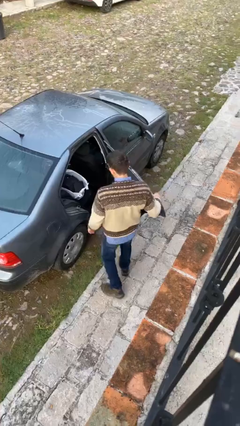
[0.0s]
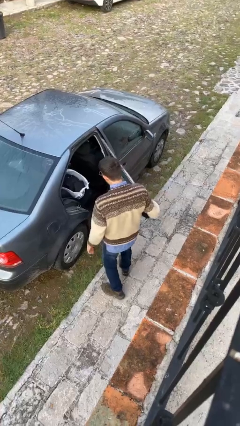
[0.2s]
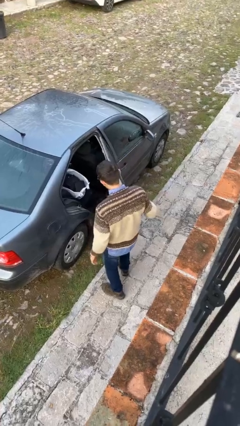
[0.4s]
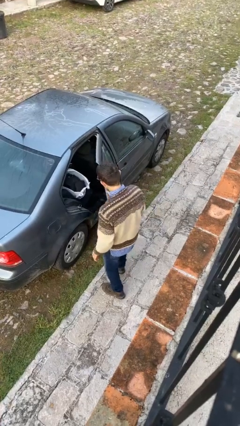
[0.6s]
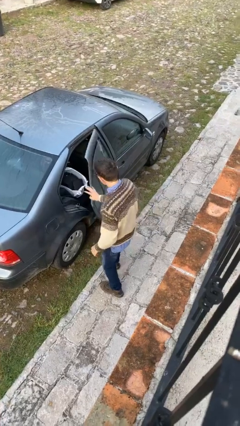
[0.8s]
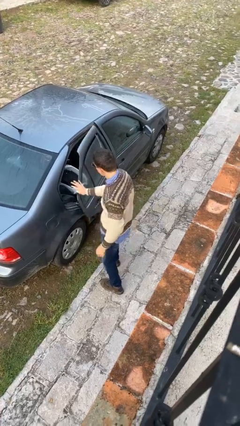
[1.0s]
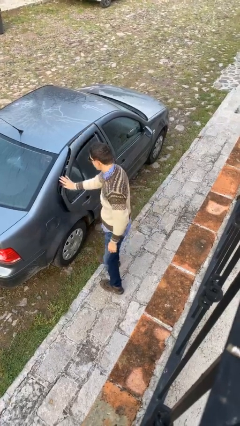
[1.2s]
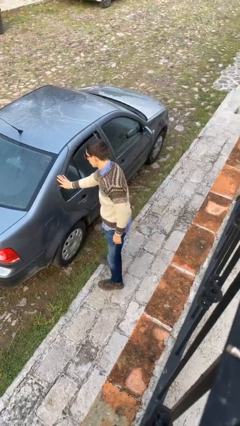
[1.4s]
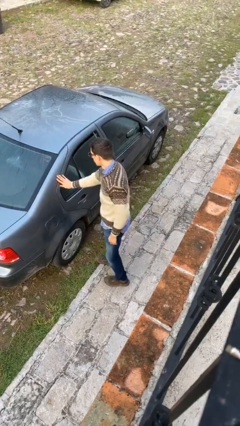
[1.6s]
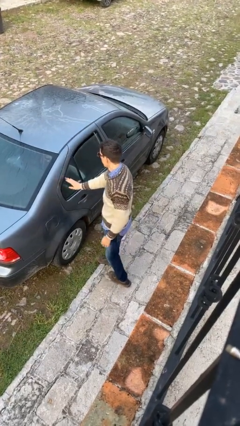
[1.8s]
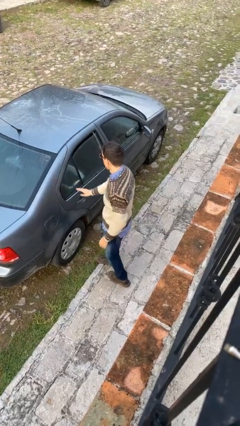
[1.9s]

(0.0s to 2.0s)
person closes car door

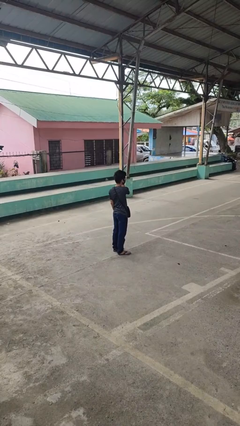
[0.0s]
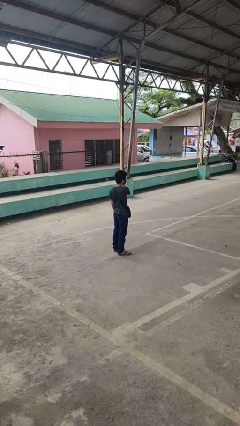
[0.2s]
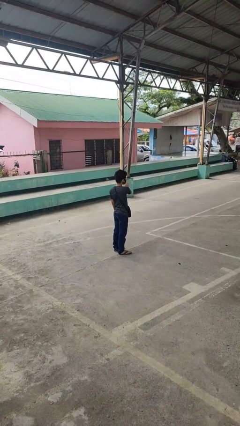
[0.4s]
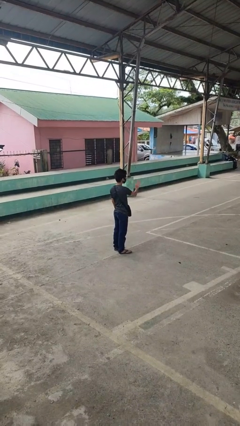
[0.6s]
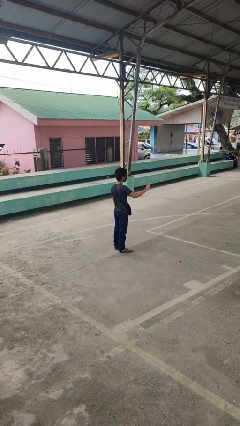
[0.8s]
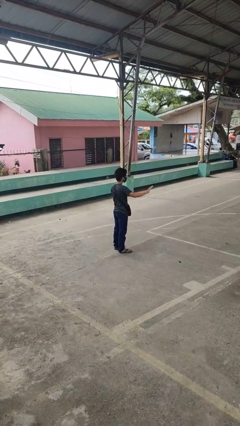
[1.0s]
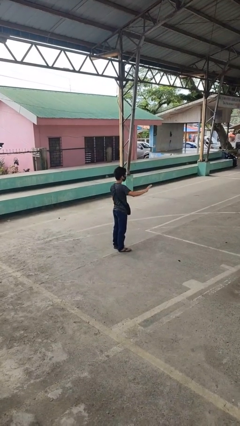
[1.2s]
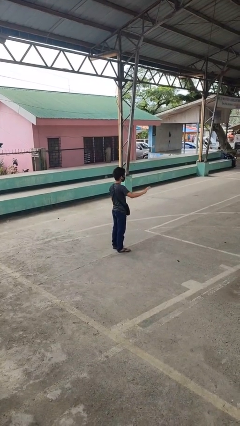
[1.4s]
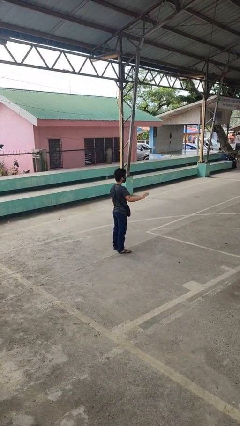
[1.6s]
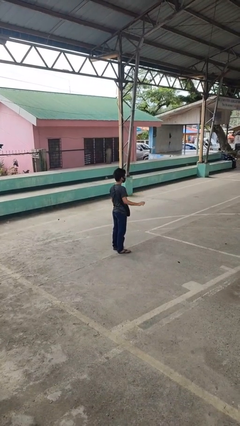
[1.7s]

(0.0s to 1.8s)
person gestures swipe right

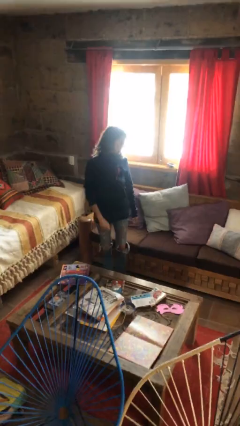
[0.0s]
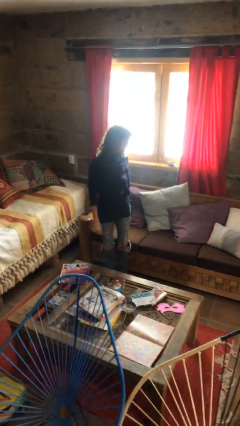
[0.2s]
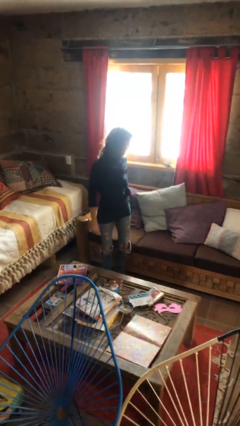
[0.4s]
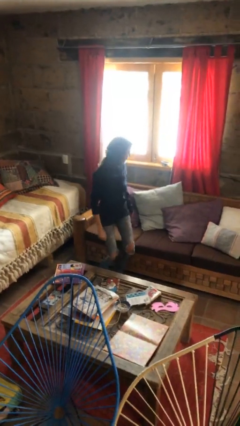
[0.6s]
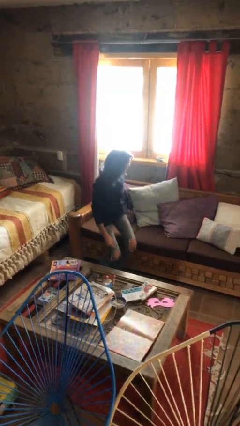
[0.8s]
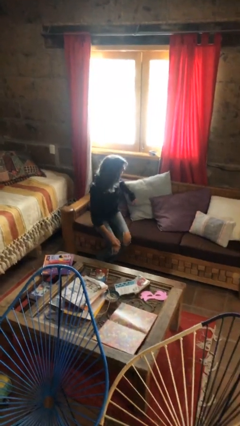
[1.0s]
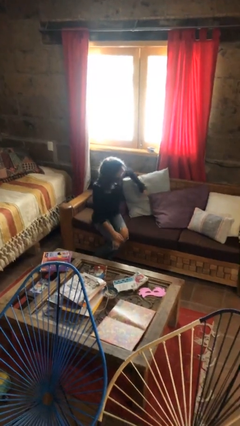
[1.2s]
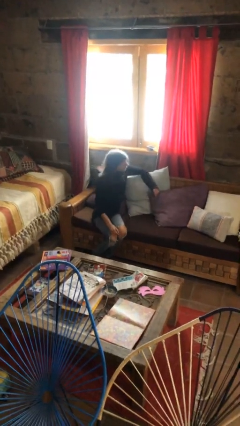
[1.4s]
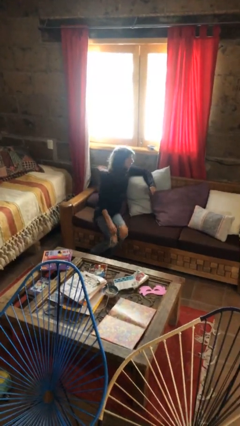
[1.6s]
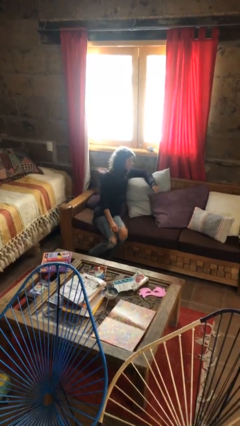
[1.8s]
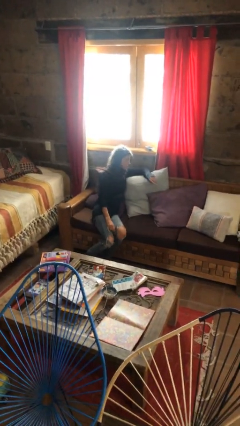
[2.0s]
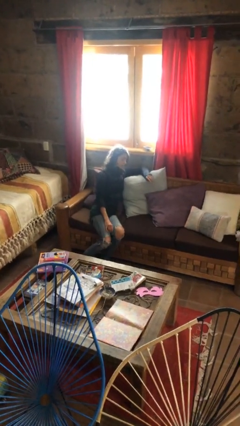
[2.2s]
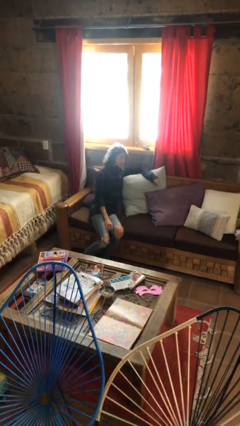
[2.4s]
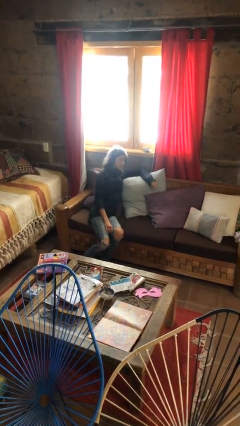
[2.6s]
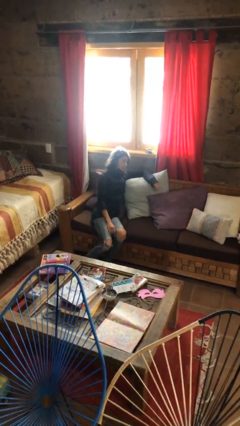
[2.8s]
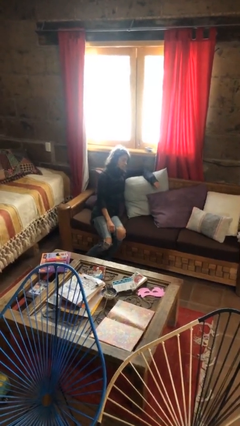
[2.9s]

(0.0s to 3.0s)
person lies down on couch

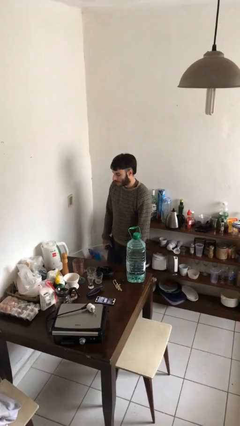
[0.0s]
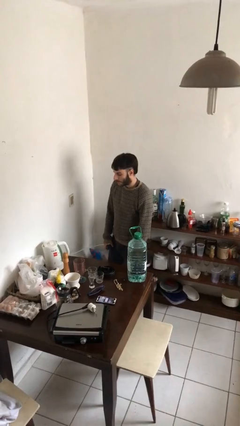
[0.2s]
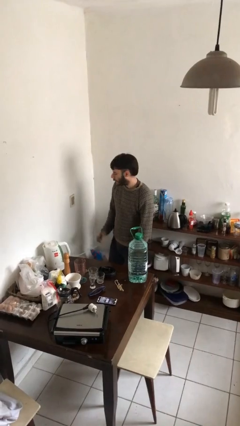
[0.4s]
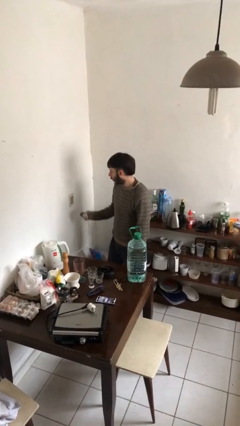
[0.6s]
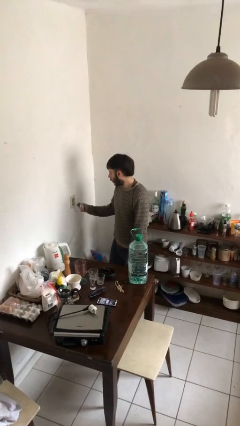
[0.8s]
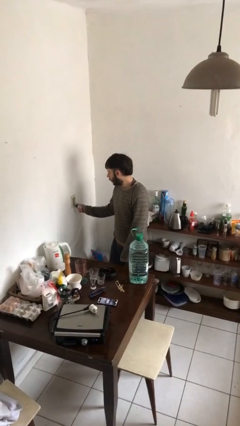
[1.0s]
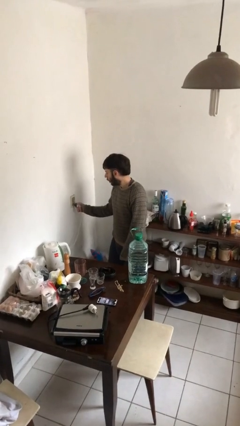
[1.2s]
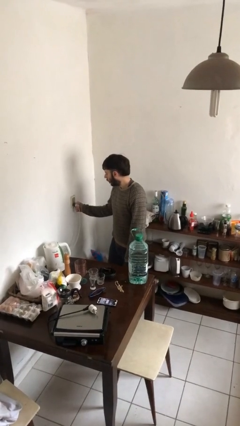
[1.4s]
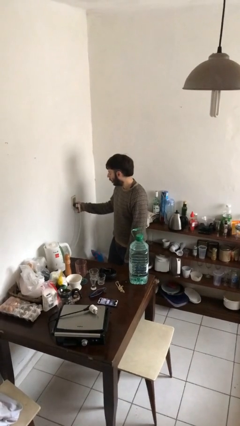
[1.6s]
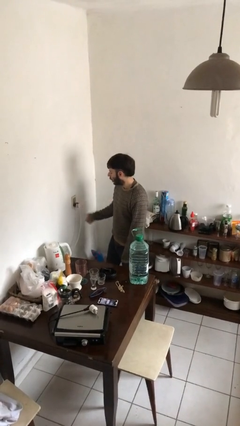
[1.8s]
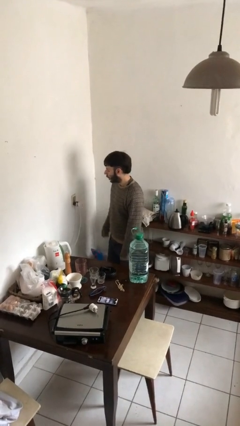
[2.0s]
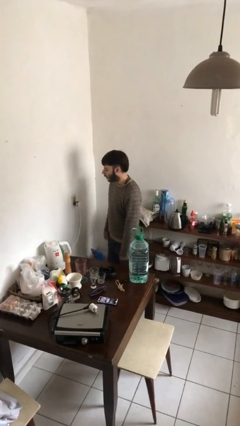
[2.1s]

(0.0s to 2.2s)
person plugs into electrical socket

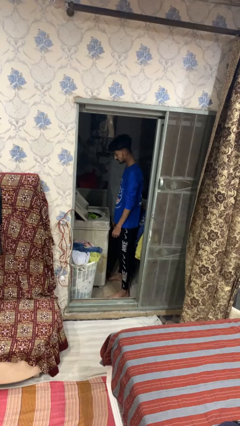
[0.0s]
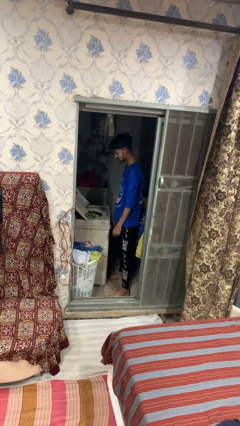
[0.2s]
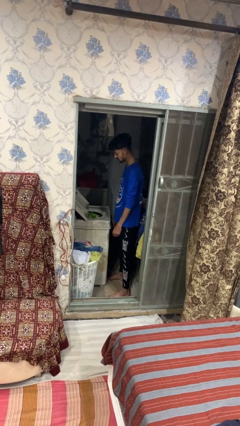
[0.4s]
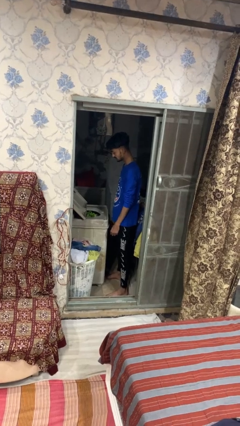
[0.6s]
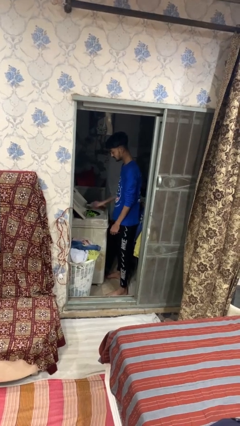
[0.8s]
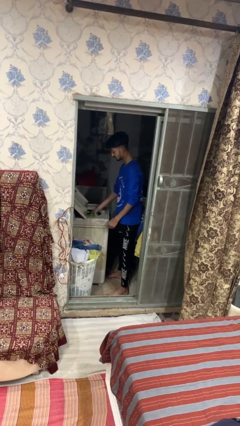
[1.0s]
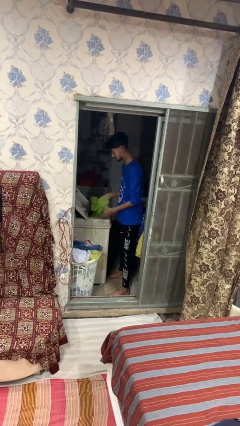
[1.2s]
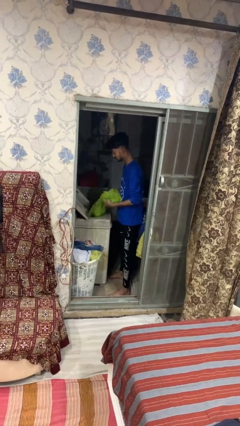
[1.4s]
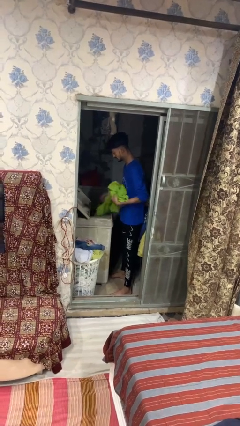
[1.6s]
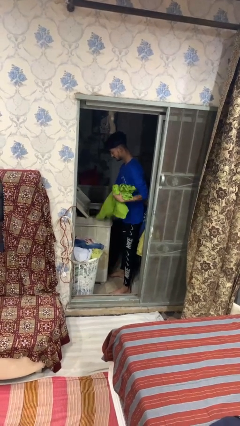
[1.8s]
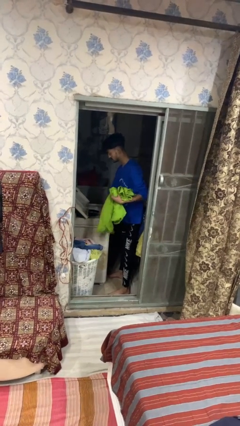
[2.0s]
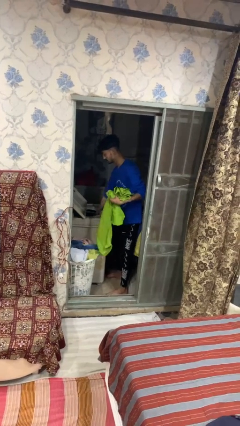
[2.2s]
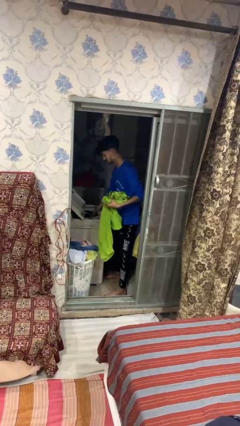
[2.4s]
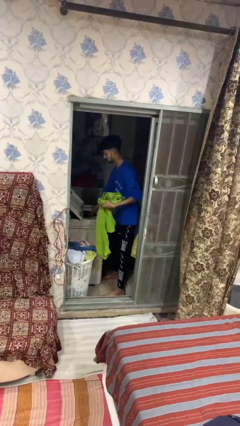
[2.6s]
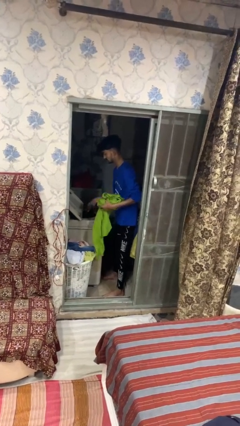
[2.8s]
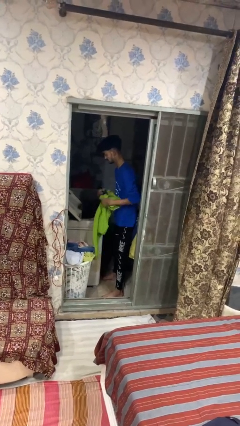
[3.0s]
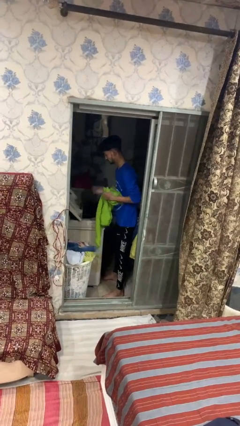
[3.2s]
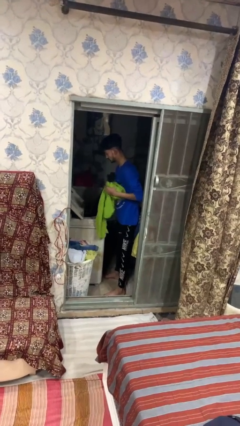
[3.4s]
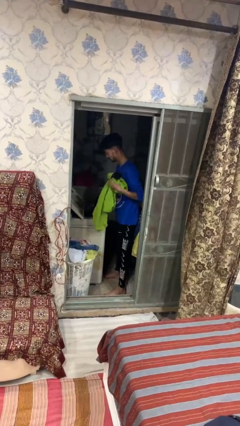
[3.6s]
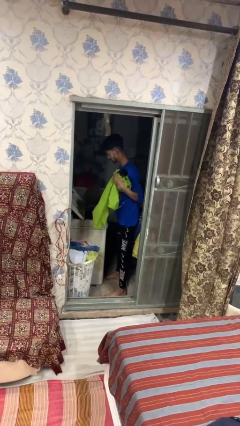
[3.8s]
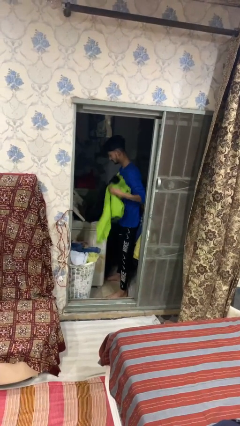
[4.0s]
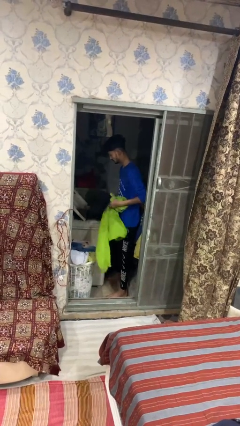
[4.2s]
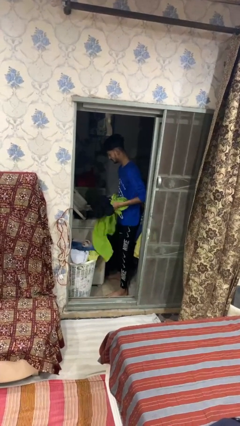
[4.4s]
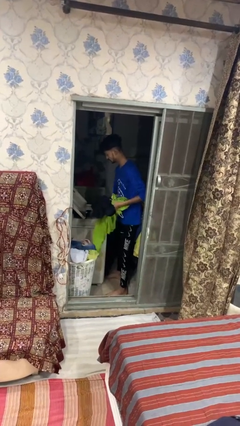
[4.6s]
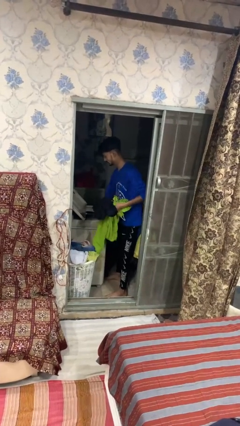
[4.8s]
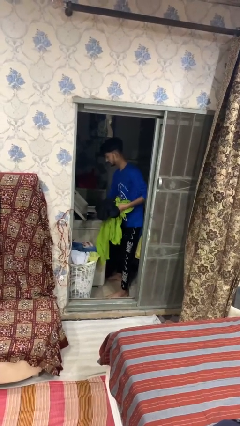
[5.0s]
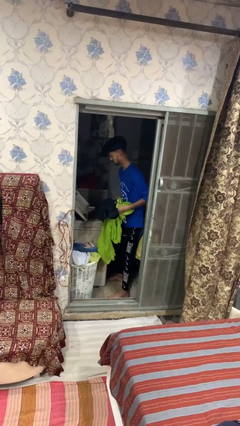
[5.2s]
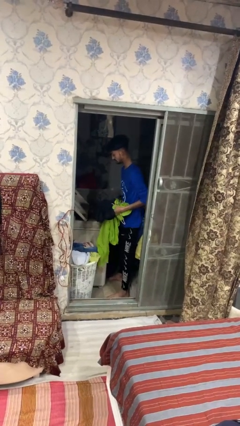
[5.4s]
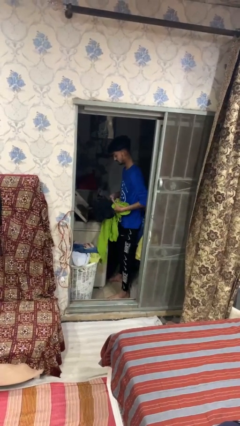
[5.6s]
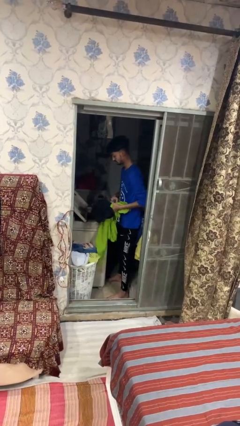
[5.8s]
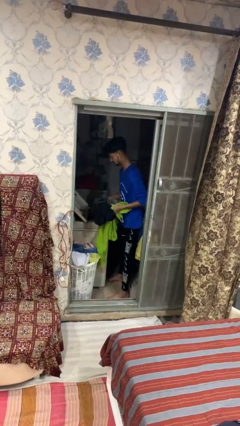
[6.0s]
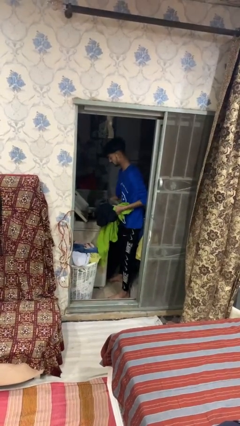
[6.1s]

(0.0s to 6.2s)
person unloads clotheswasher

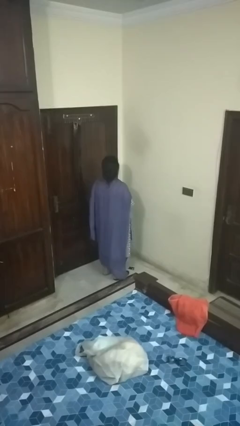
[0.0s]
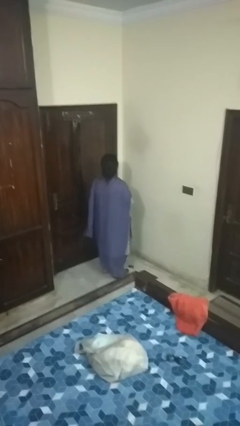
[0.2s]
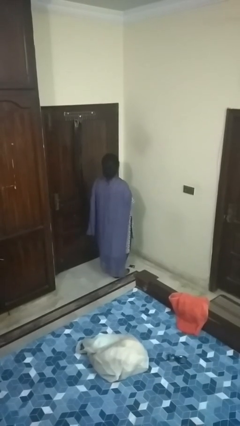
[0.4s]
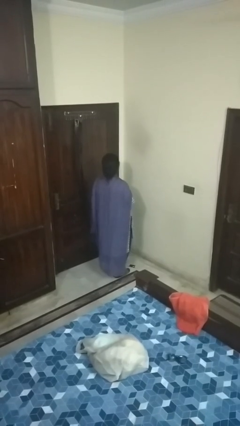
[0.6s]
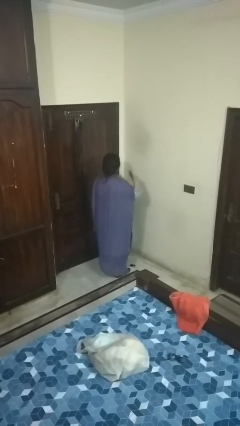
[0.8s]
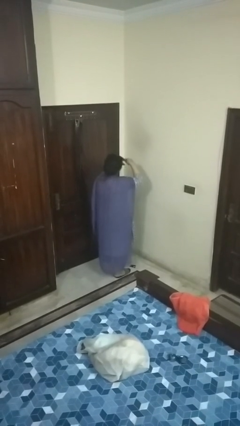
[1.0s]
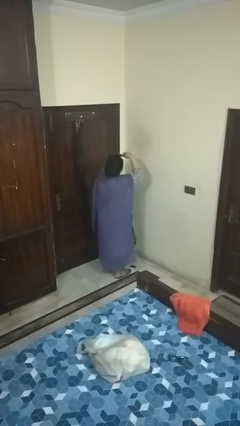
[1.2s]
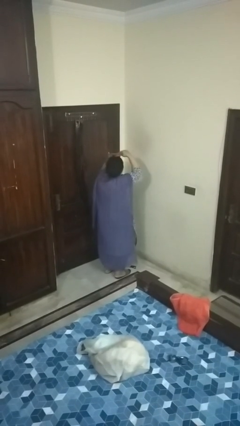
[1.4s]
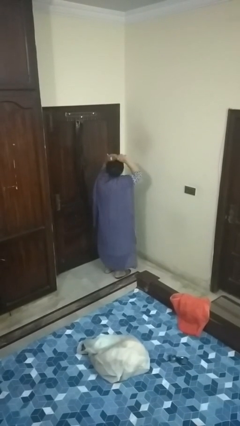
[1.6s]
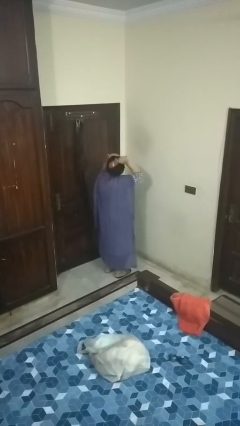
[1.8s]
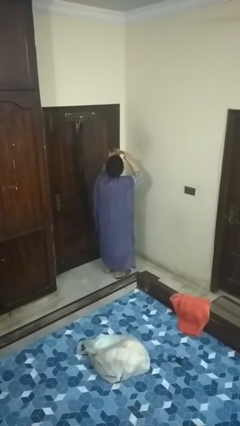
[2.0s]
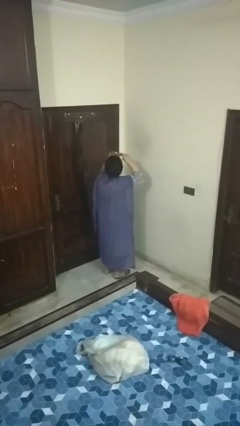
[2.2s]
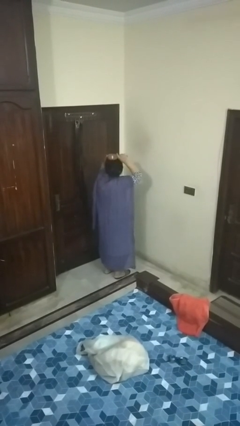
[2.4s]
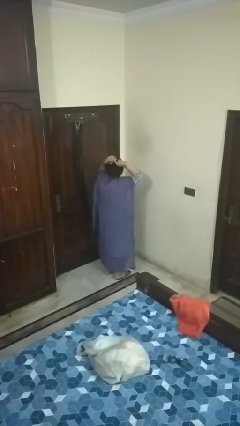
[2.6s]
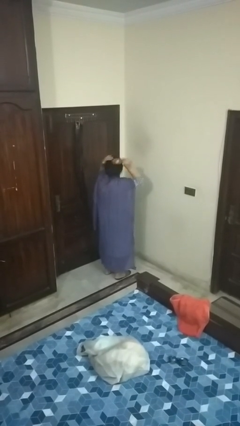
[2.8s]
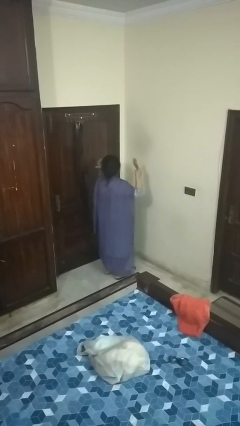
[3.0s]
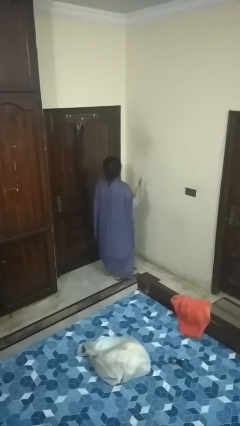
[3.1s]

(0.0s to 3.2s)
person brushes hair
